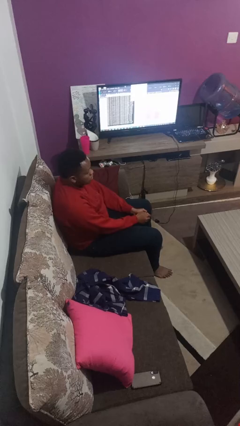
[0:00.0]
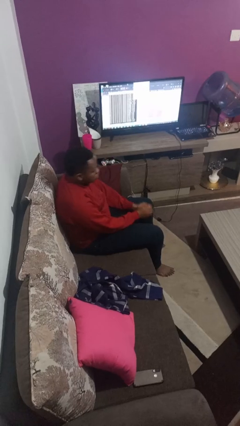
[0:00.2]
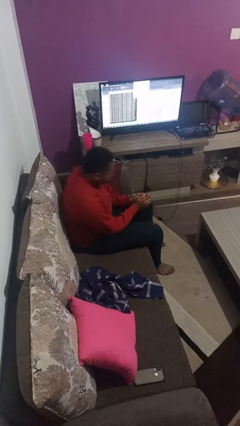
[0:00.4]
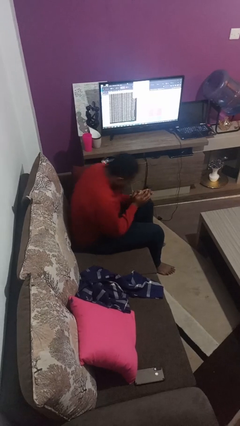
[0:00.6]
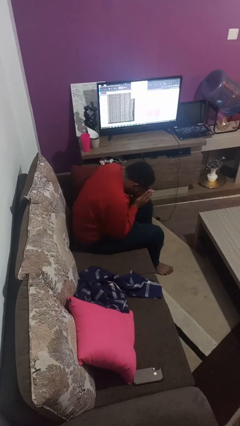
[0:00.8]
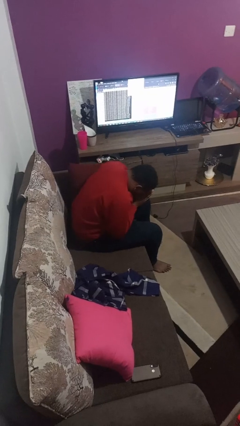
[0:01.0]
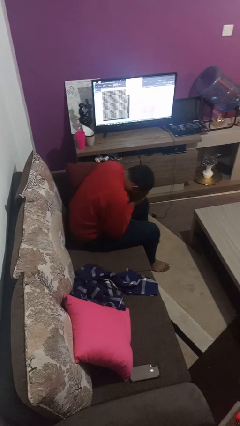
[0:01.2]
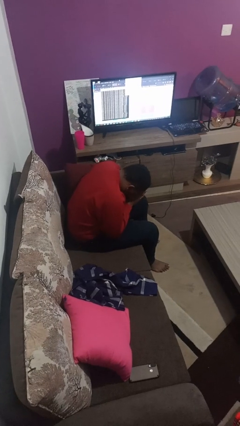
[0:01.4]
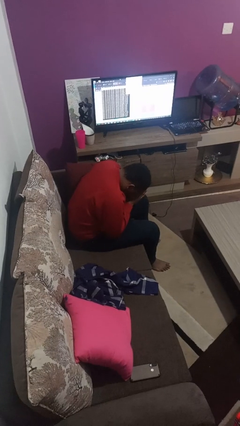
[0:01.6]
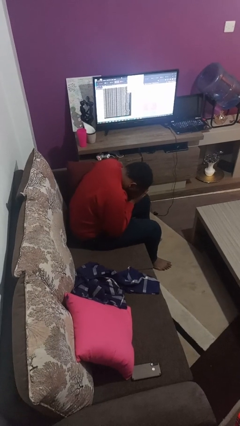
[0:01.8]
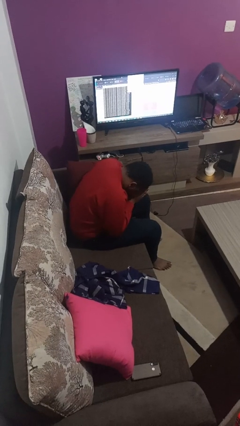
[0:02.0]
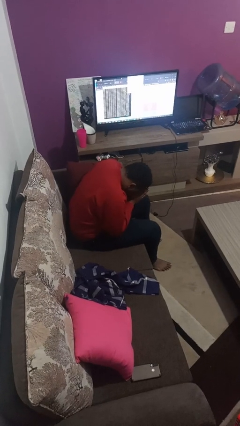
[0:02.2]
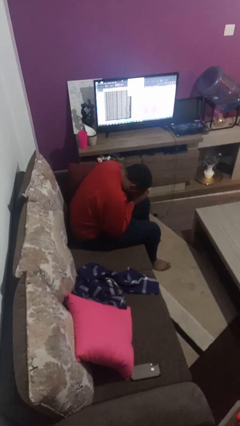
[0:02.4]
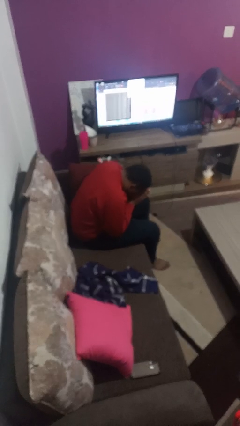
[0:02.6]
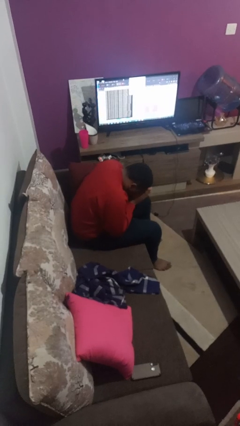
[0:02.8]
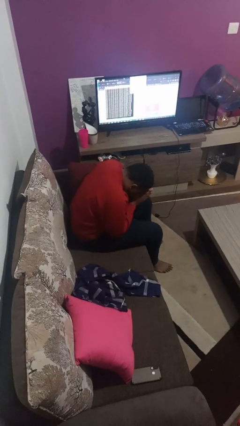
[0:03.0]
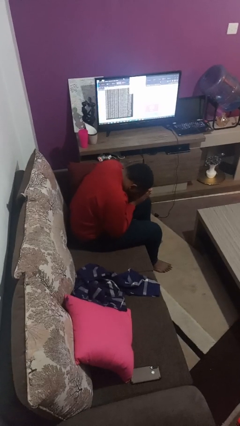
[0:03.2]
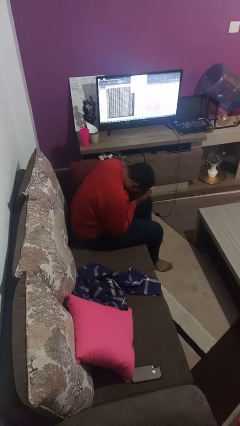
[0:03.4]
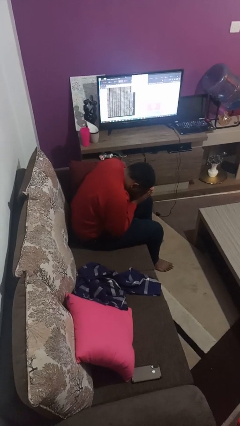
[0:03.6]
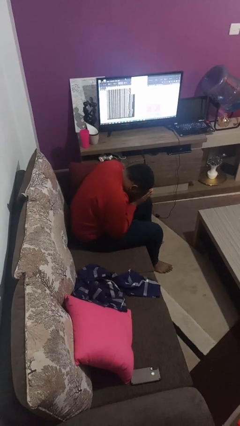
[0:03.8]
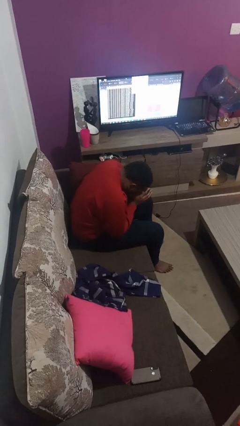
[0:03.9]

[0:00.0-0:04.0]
person prays

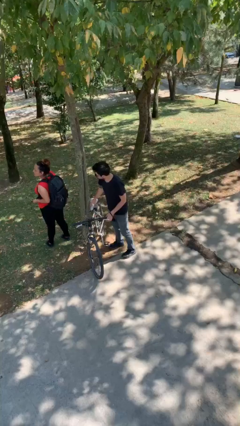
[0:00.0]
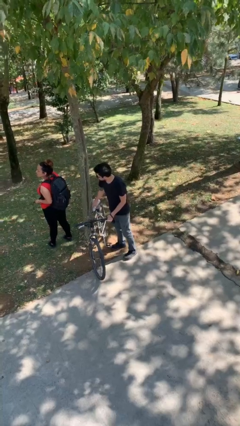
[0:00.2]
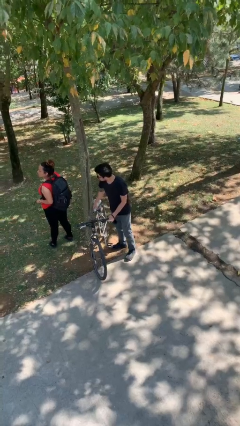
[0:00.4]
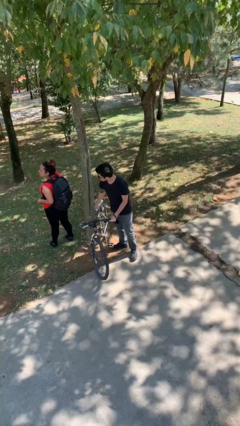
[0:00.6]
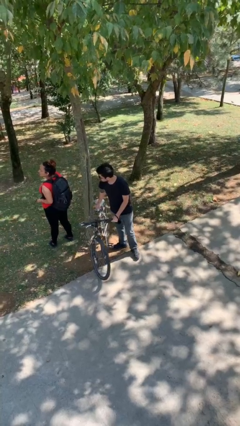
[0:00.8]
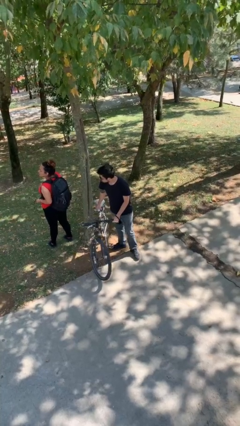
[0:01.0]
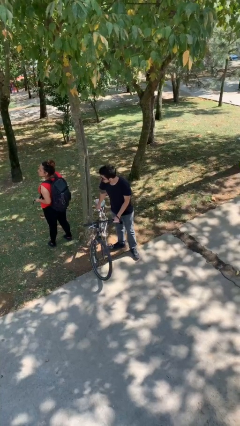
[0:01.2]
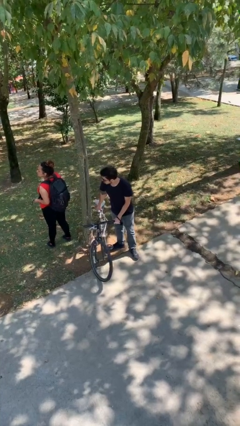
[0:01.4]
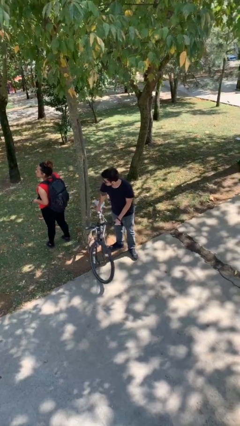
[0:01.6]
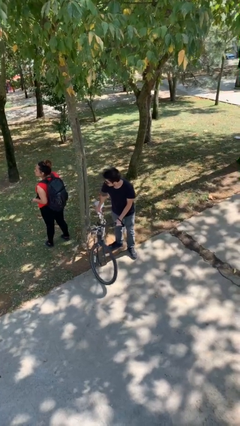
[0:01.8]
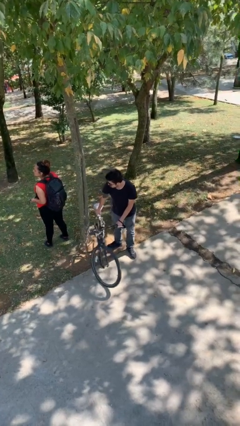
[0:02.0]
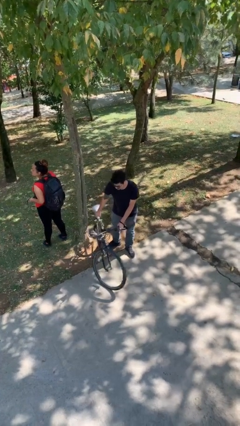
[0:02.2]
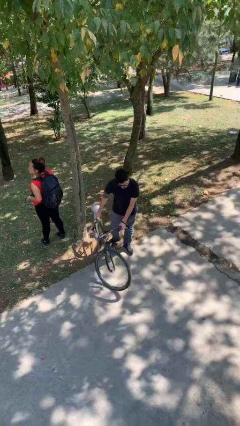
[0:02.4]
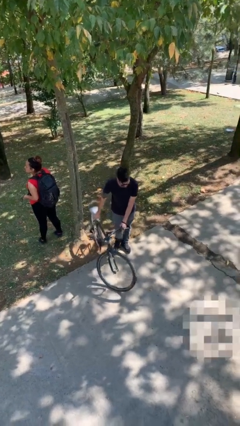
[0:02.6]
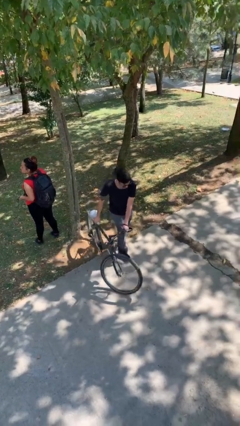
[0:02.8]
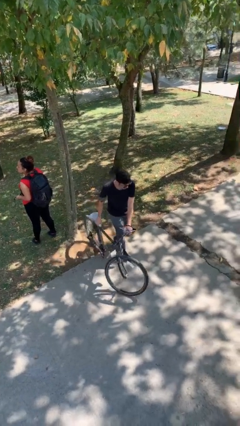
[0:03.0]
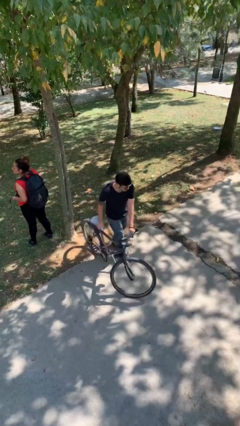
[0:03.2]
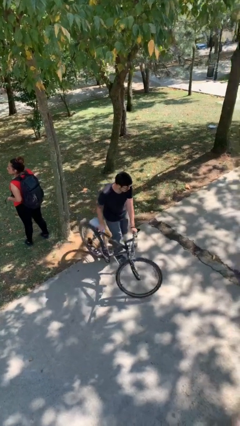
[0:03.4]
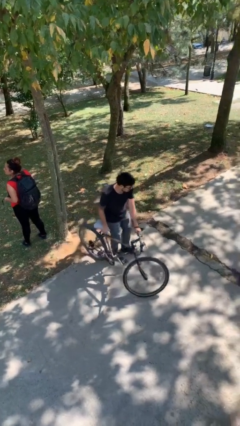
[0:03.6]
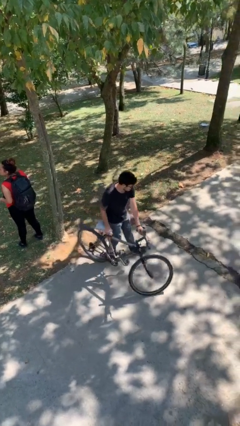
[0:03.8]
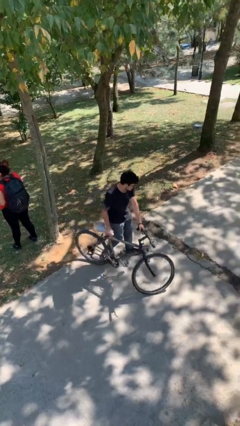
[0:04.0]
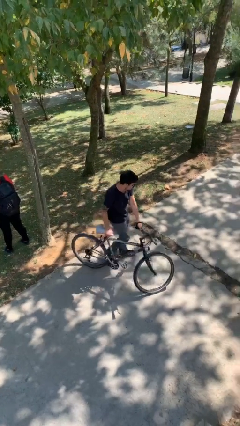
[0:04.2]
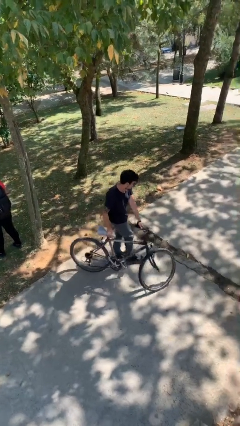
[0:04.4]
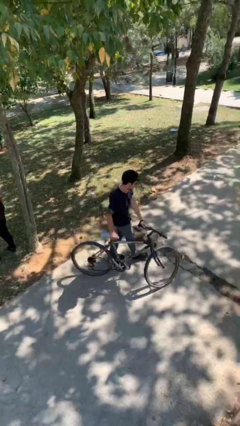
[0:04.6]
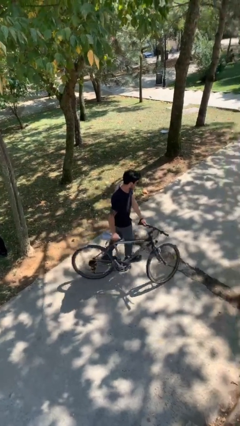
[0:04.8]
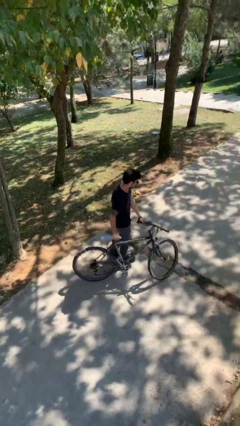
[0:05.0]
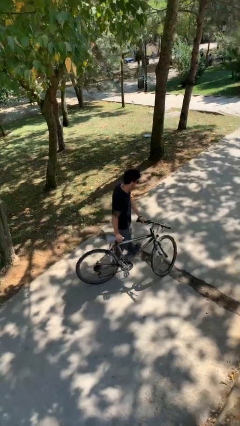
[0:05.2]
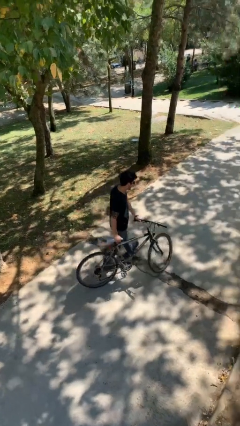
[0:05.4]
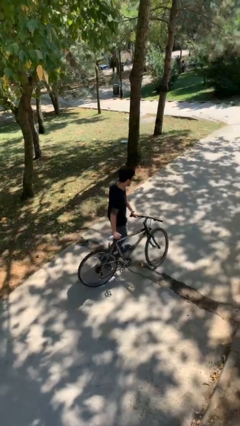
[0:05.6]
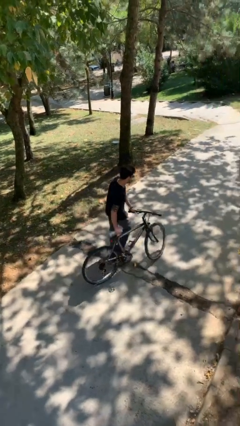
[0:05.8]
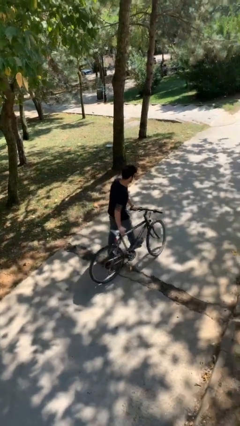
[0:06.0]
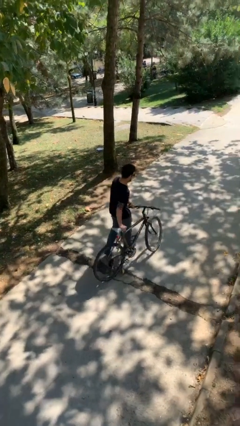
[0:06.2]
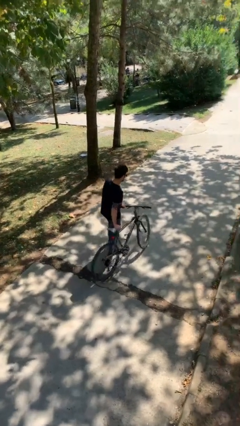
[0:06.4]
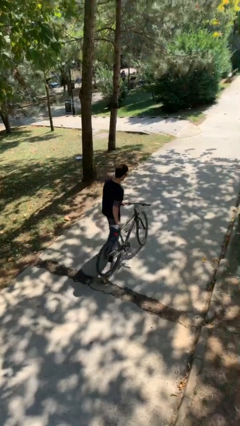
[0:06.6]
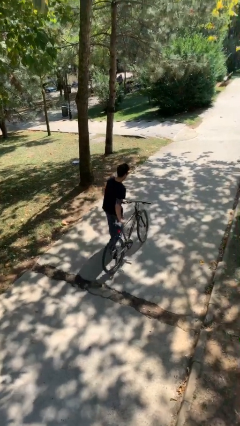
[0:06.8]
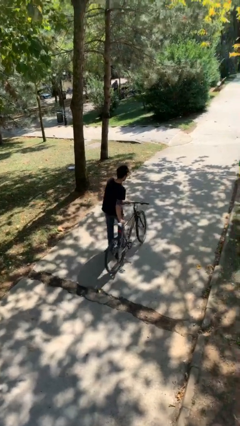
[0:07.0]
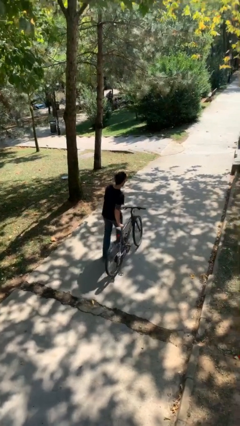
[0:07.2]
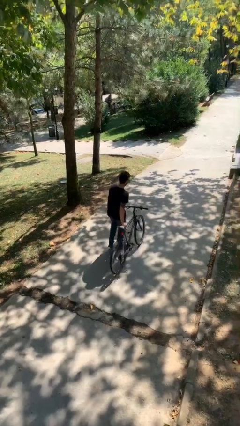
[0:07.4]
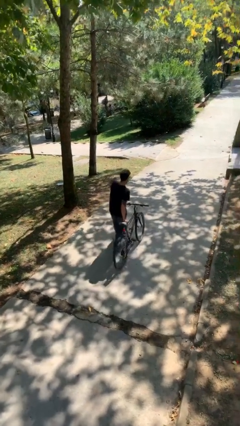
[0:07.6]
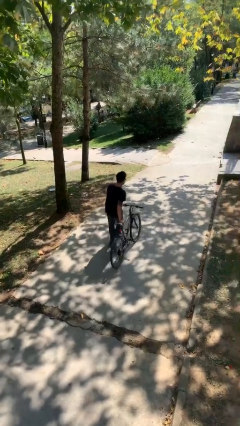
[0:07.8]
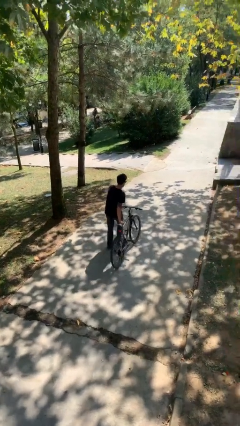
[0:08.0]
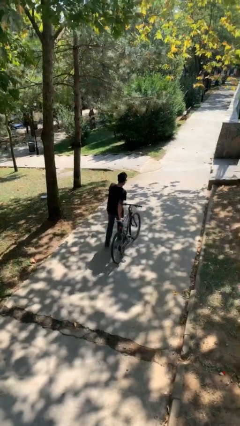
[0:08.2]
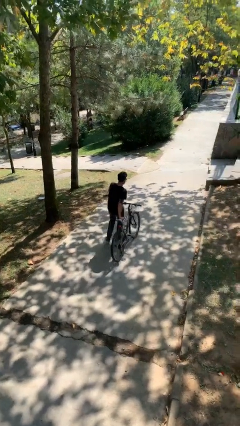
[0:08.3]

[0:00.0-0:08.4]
person steals object from person

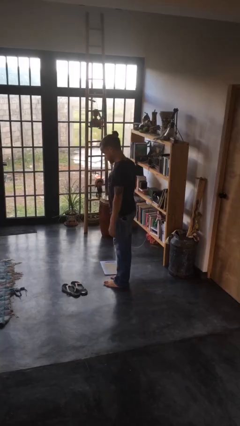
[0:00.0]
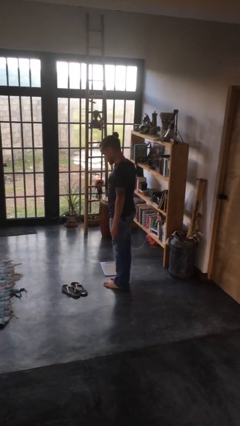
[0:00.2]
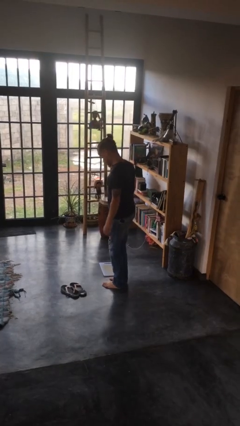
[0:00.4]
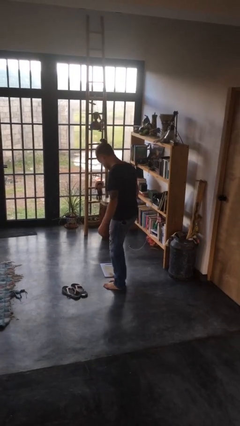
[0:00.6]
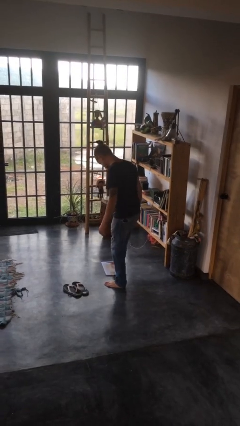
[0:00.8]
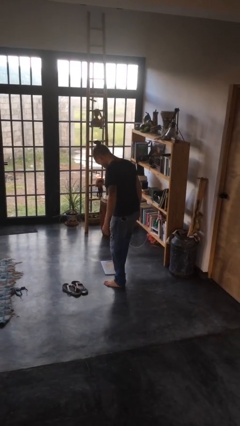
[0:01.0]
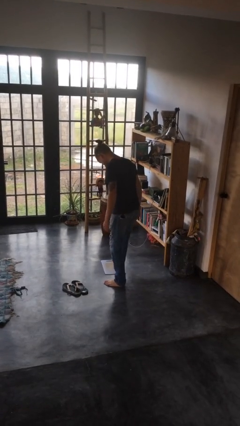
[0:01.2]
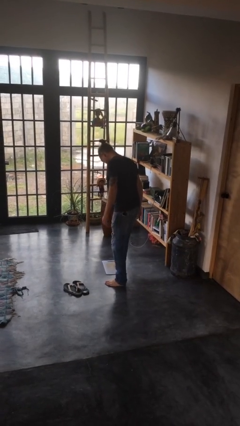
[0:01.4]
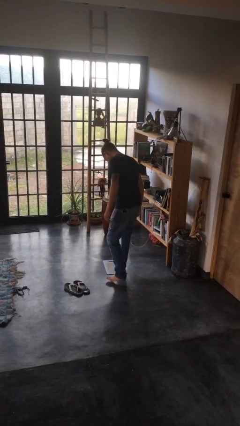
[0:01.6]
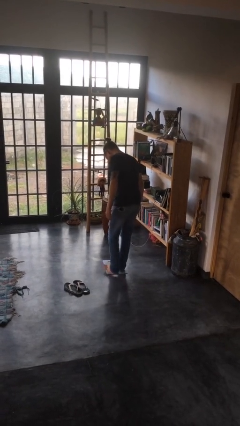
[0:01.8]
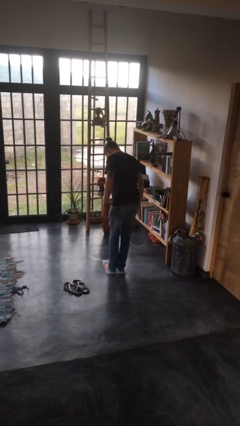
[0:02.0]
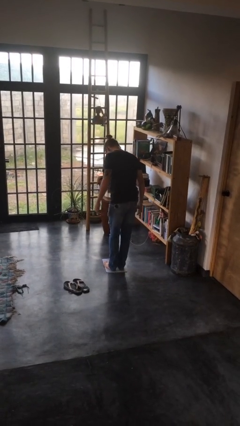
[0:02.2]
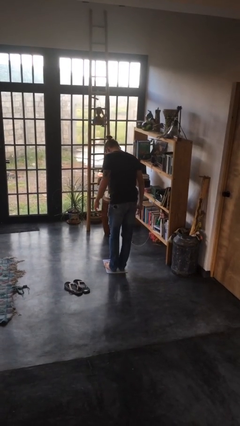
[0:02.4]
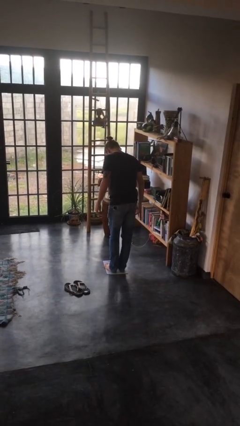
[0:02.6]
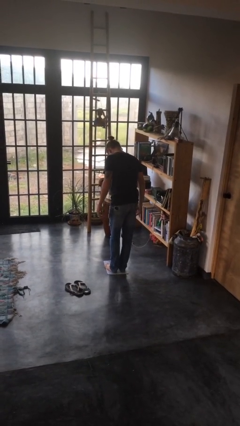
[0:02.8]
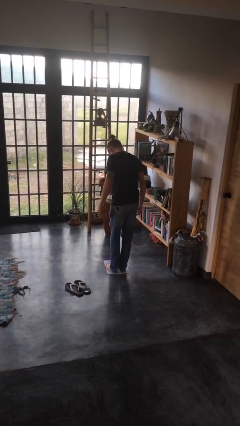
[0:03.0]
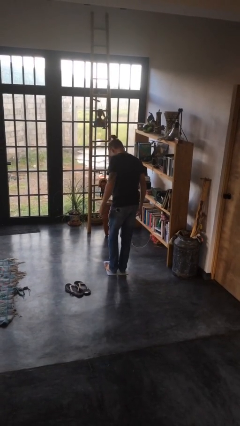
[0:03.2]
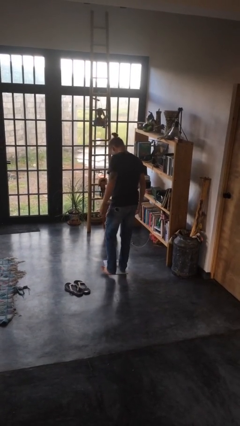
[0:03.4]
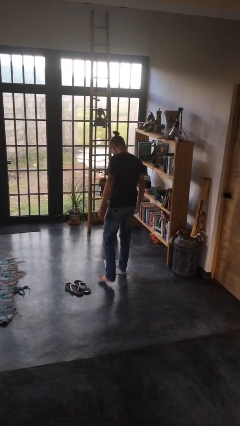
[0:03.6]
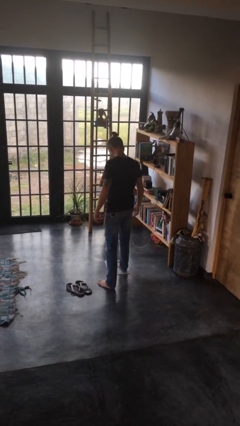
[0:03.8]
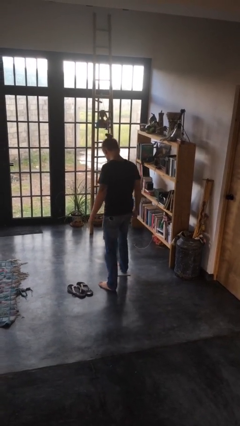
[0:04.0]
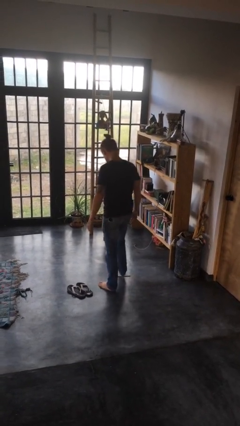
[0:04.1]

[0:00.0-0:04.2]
person uses bodyweight scale

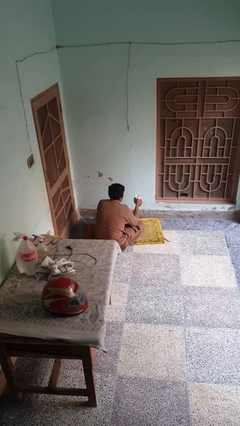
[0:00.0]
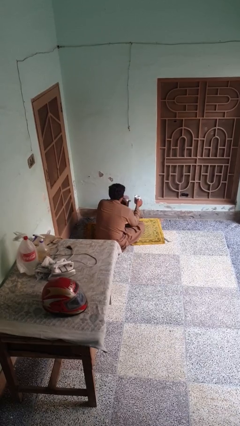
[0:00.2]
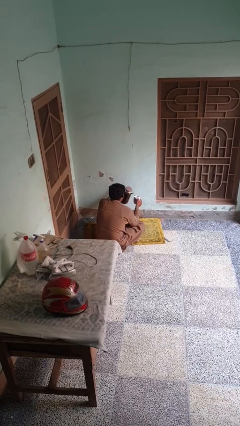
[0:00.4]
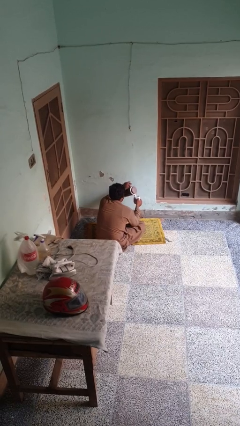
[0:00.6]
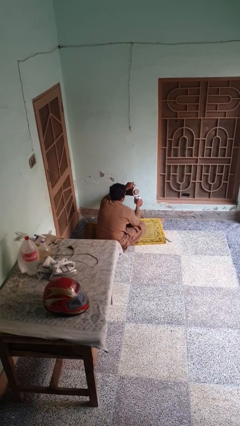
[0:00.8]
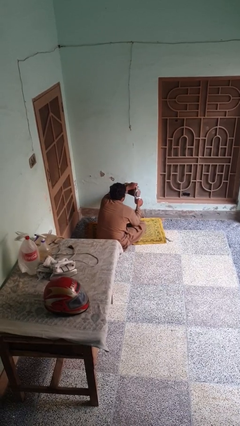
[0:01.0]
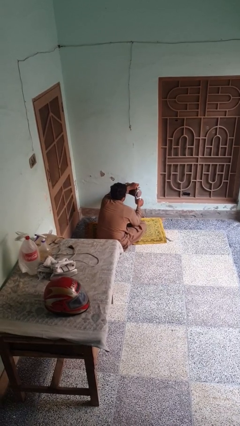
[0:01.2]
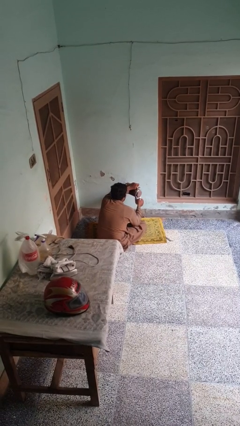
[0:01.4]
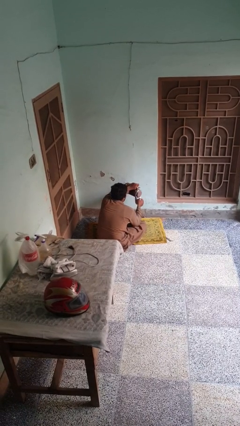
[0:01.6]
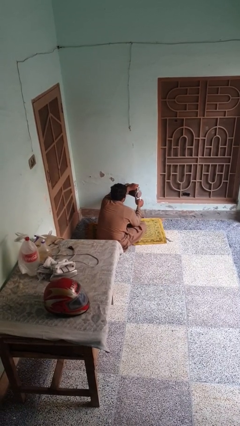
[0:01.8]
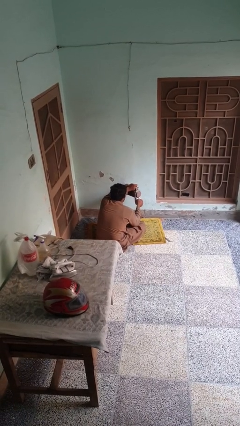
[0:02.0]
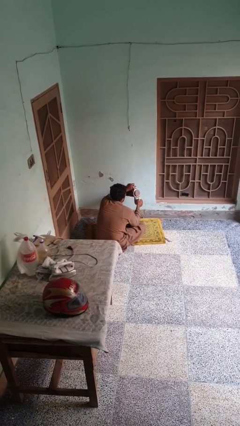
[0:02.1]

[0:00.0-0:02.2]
person pours coffee into mug
